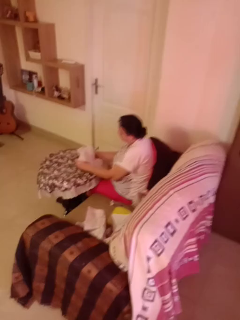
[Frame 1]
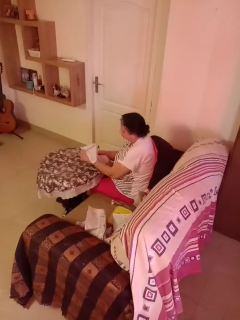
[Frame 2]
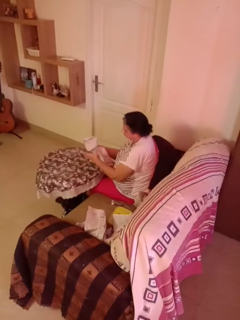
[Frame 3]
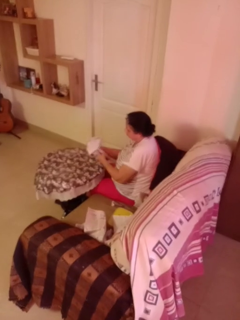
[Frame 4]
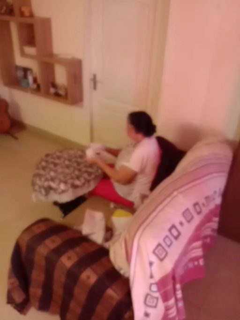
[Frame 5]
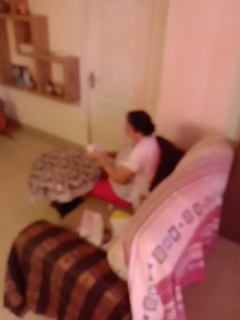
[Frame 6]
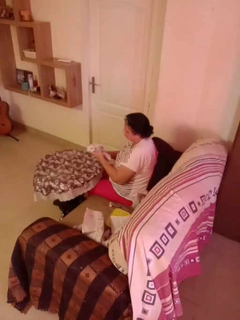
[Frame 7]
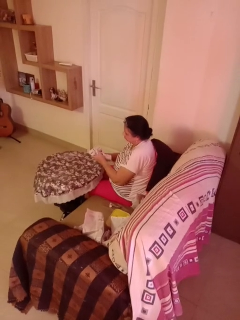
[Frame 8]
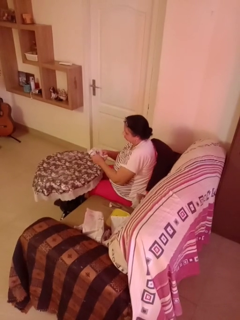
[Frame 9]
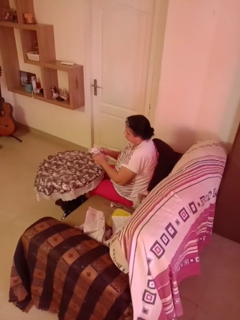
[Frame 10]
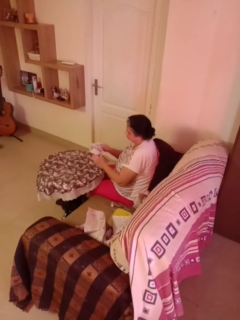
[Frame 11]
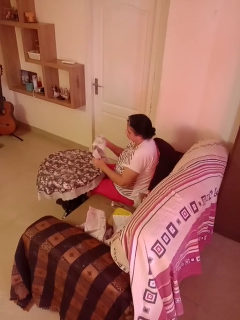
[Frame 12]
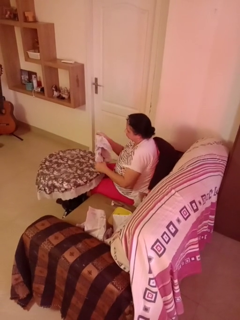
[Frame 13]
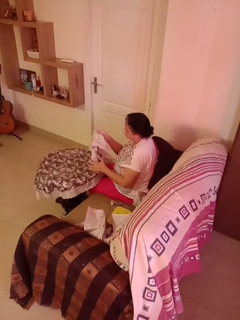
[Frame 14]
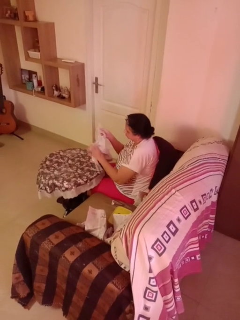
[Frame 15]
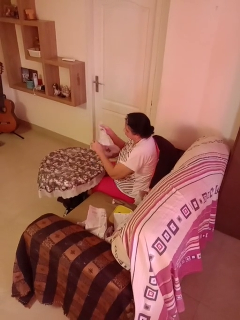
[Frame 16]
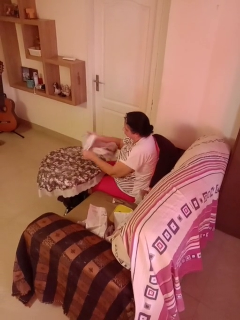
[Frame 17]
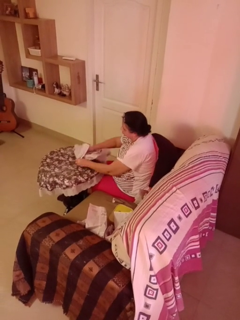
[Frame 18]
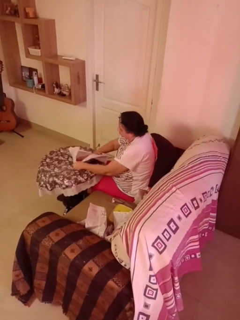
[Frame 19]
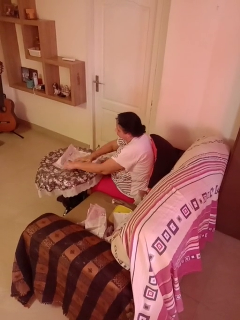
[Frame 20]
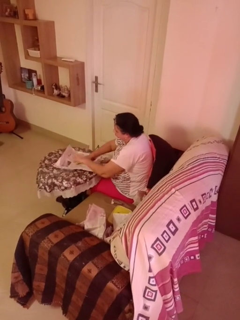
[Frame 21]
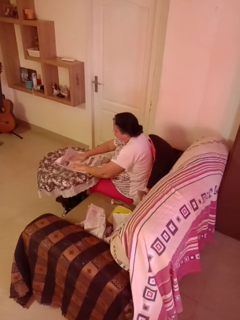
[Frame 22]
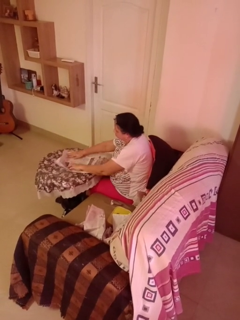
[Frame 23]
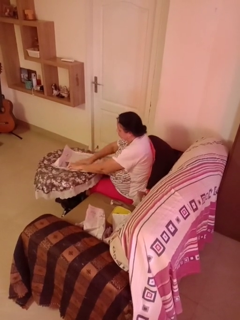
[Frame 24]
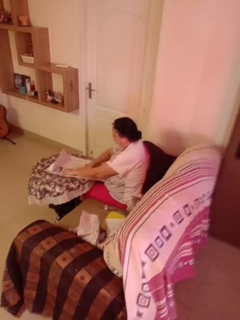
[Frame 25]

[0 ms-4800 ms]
person crumples paper

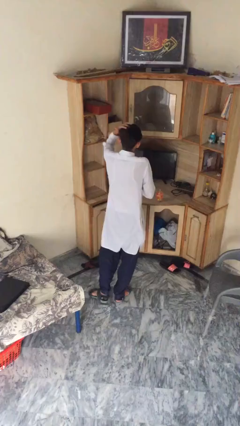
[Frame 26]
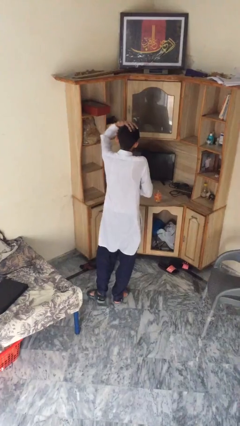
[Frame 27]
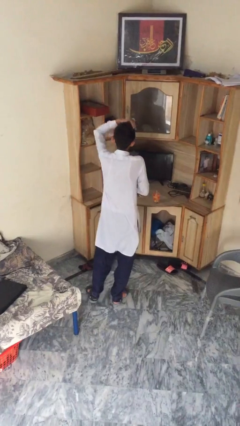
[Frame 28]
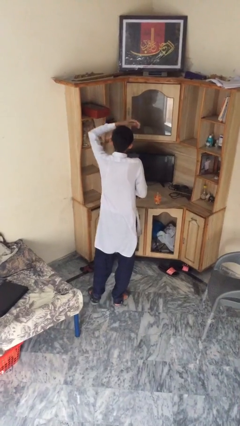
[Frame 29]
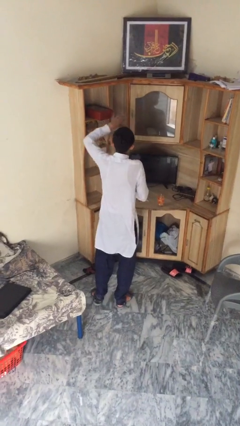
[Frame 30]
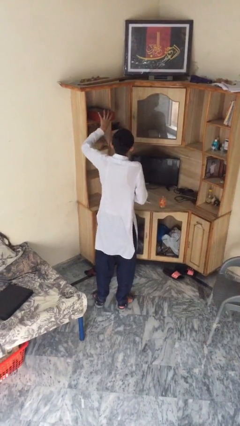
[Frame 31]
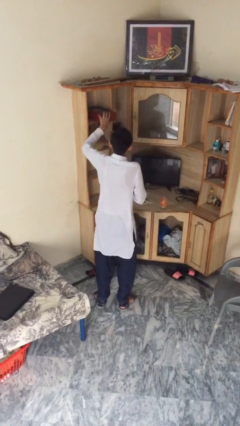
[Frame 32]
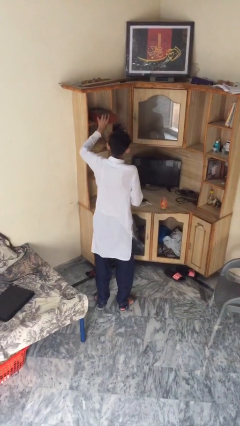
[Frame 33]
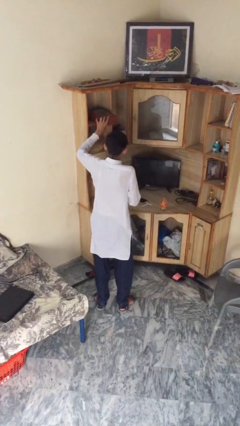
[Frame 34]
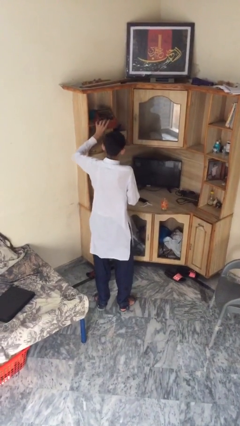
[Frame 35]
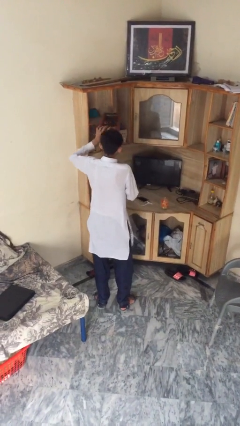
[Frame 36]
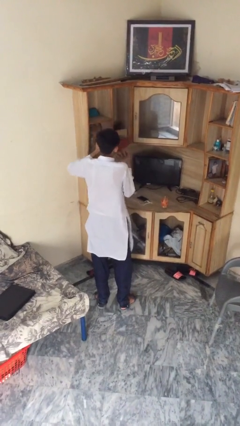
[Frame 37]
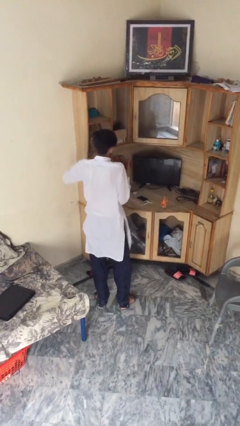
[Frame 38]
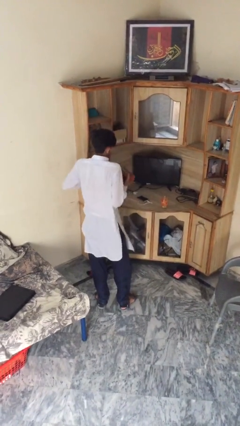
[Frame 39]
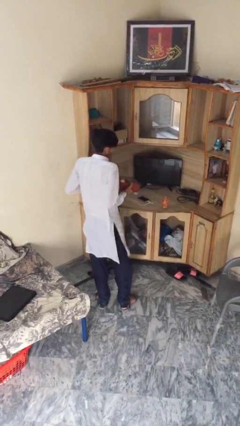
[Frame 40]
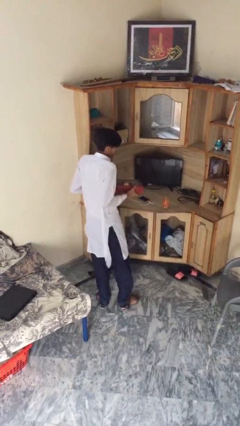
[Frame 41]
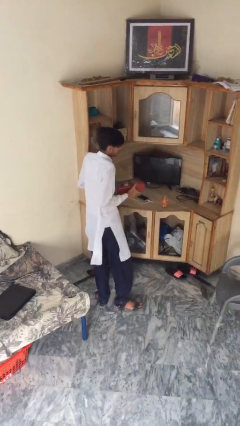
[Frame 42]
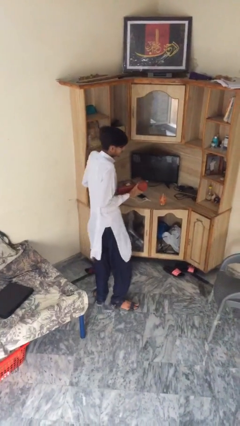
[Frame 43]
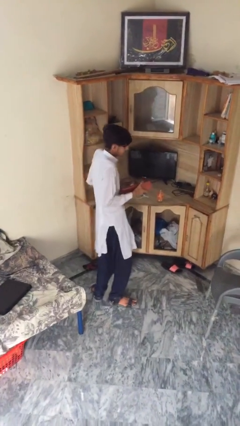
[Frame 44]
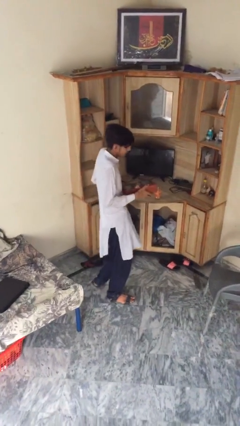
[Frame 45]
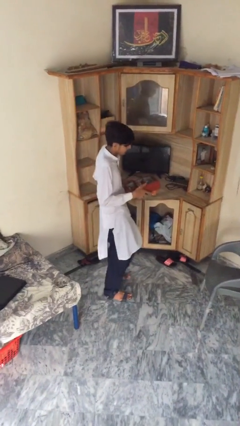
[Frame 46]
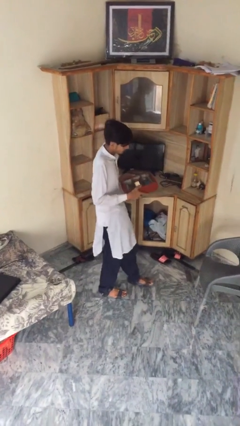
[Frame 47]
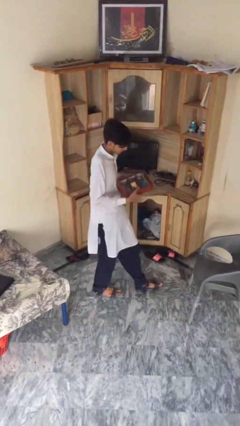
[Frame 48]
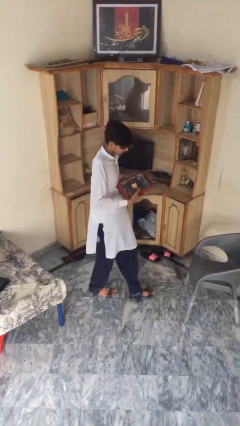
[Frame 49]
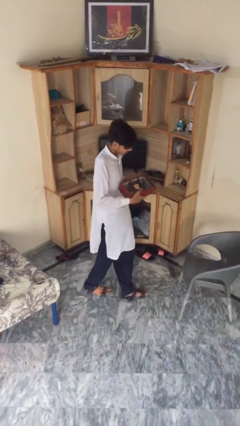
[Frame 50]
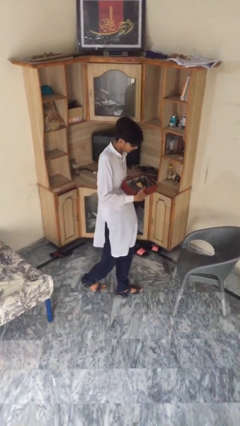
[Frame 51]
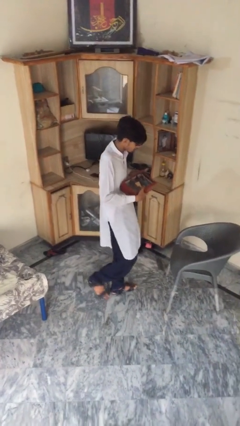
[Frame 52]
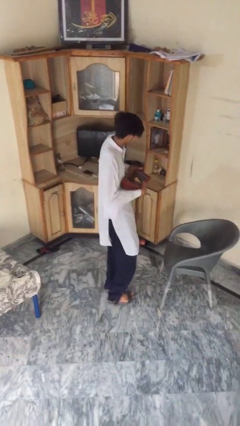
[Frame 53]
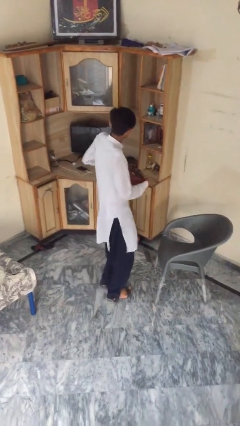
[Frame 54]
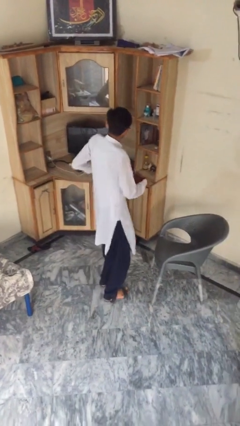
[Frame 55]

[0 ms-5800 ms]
person picks up object from shelf

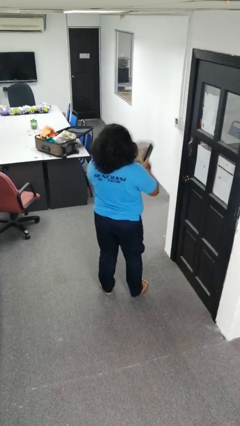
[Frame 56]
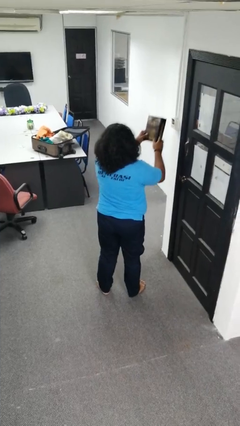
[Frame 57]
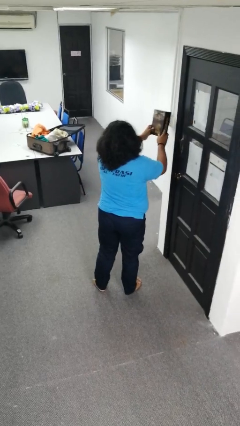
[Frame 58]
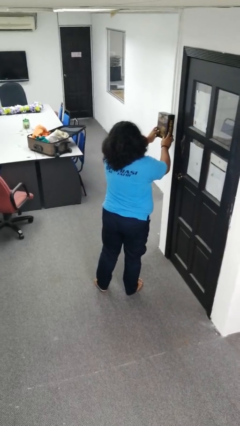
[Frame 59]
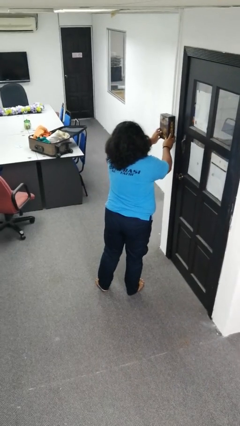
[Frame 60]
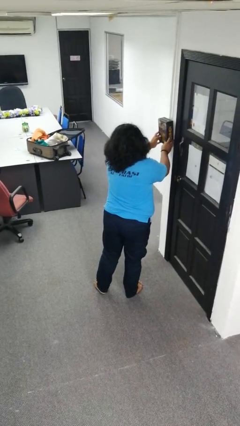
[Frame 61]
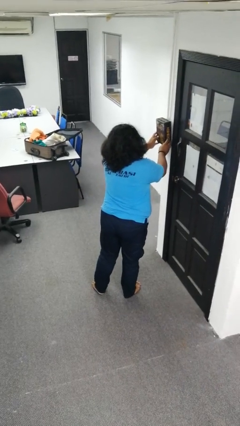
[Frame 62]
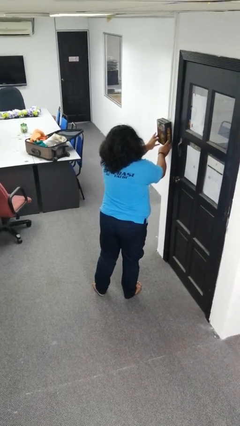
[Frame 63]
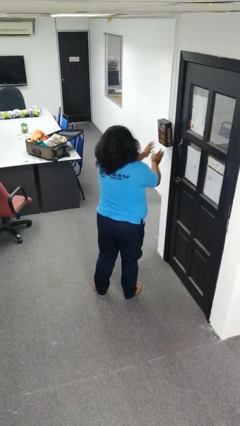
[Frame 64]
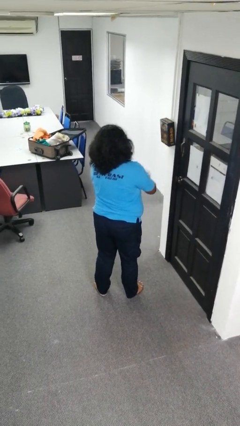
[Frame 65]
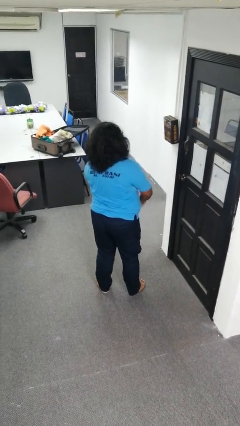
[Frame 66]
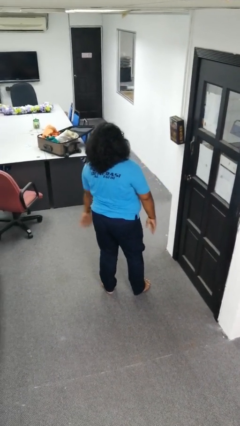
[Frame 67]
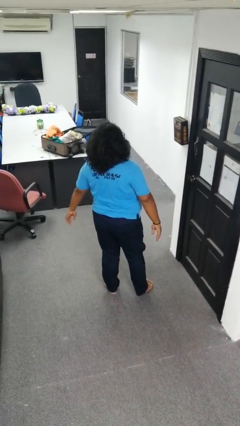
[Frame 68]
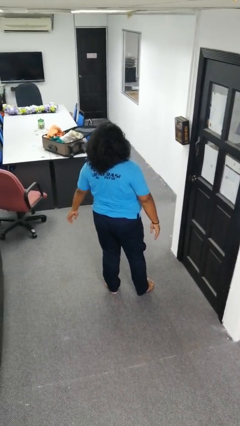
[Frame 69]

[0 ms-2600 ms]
person puts up picture frame

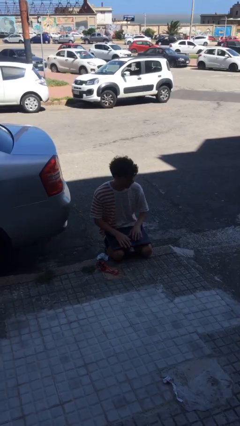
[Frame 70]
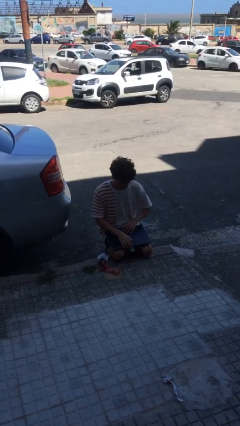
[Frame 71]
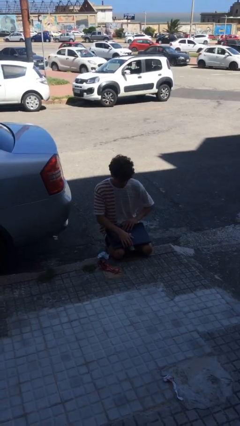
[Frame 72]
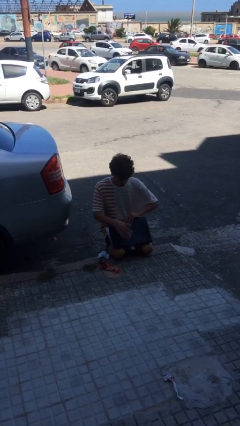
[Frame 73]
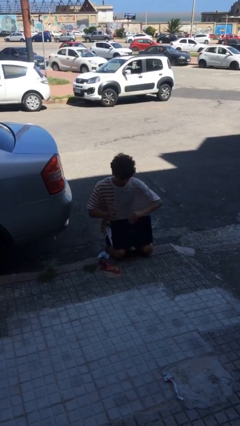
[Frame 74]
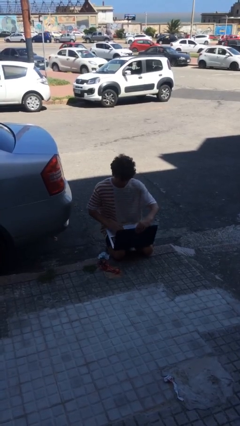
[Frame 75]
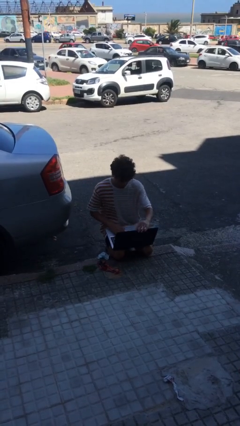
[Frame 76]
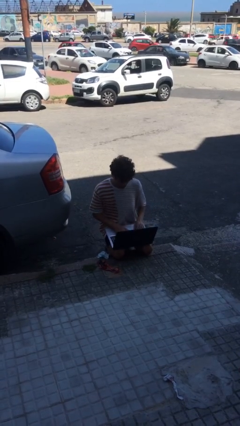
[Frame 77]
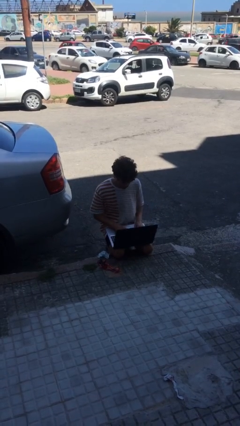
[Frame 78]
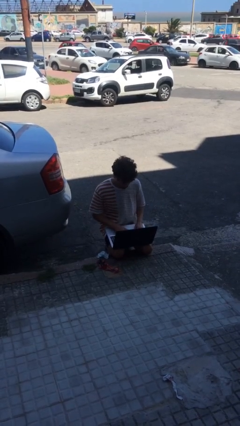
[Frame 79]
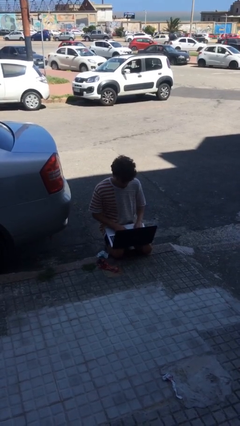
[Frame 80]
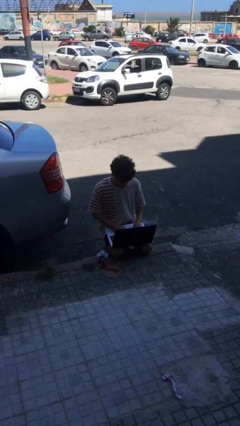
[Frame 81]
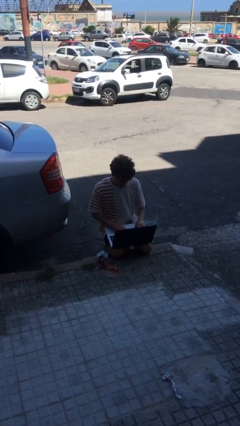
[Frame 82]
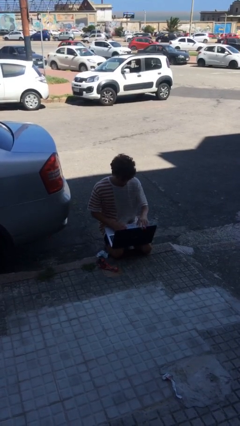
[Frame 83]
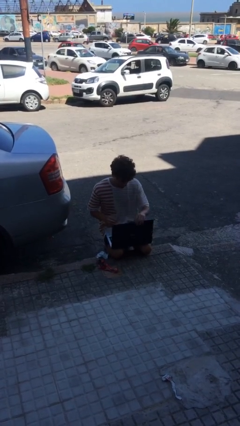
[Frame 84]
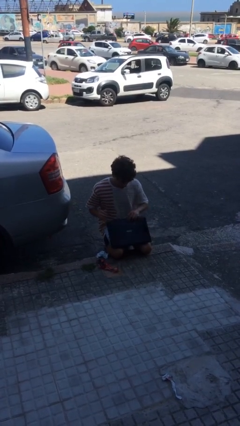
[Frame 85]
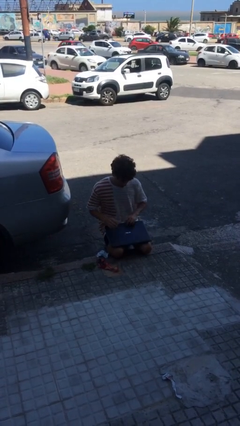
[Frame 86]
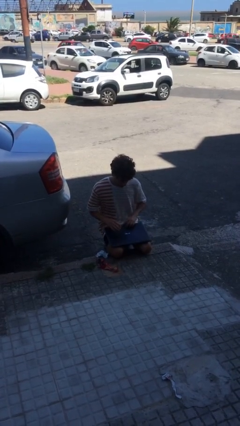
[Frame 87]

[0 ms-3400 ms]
person interacts with laptop

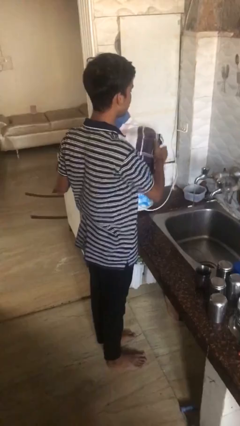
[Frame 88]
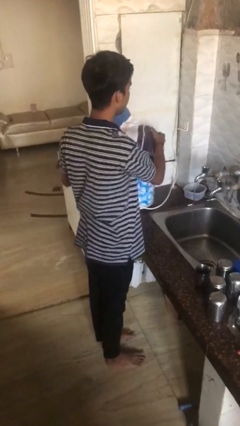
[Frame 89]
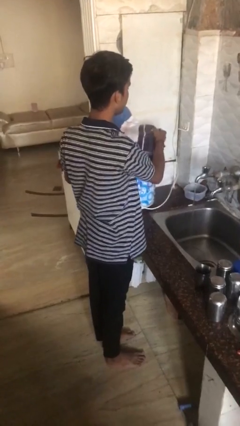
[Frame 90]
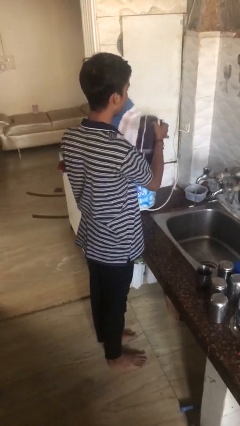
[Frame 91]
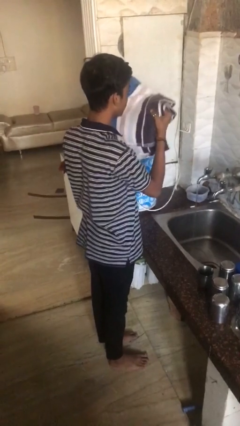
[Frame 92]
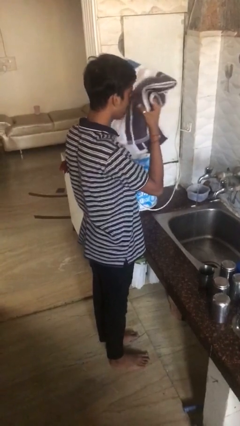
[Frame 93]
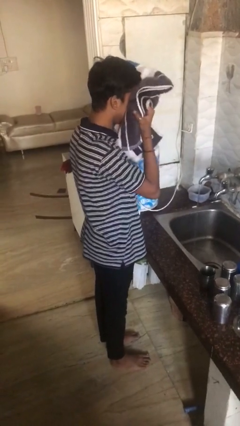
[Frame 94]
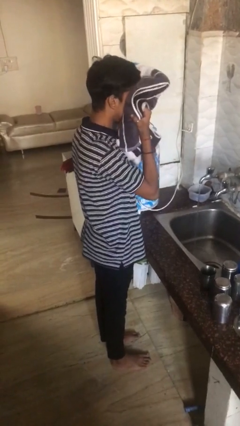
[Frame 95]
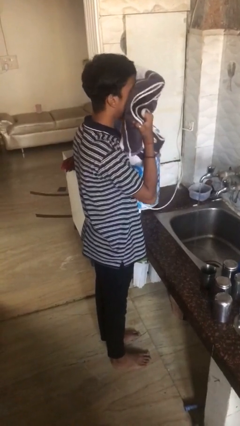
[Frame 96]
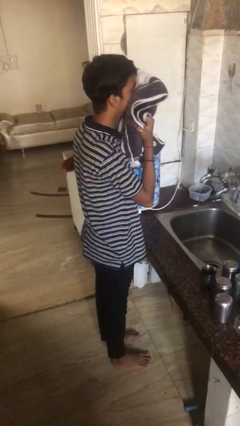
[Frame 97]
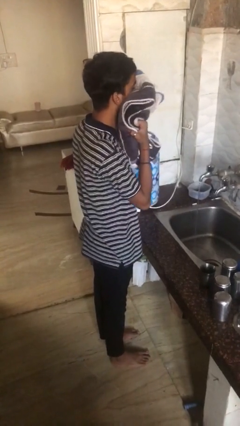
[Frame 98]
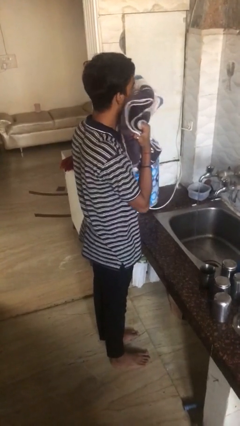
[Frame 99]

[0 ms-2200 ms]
person dries face with towel

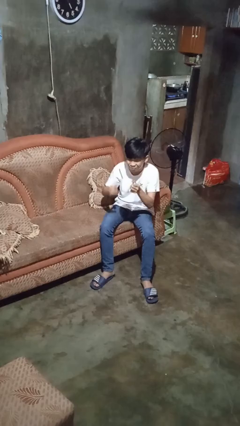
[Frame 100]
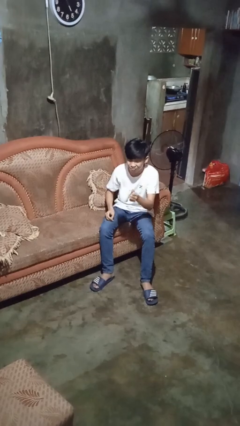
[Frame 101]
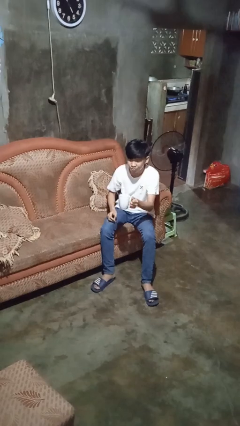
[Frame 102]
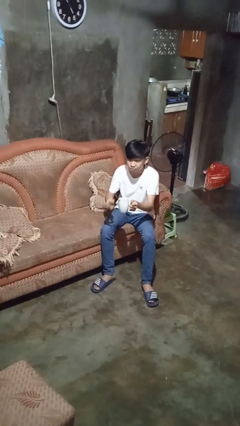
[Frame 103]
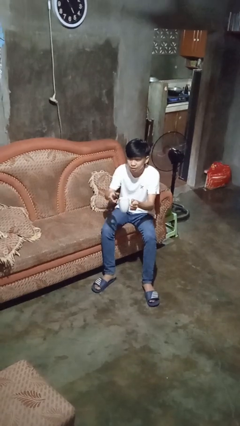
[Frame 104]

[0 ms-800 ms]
person stirs mug
